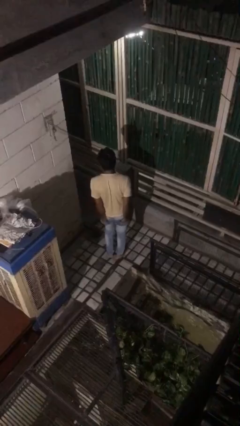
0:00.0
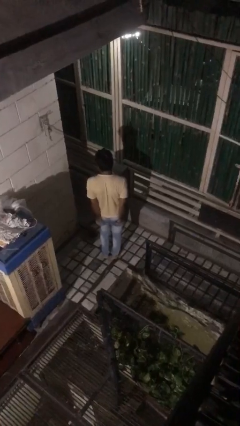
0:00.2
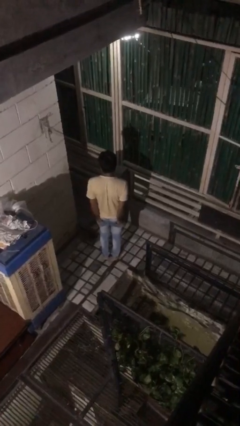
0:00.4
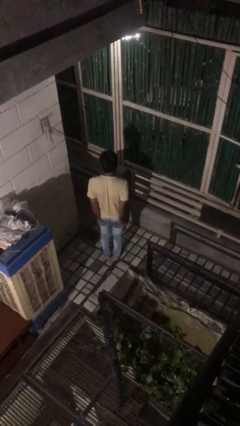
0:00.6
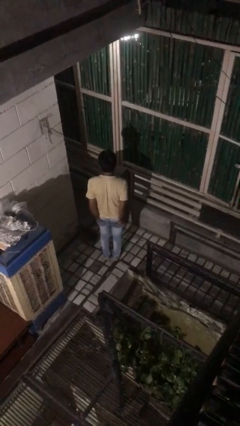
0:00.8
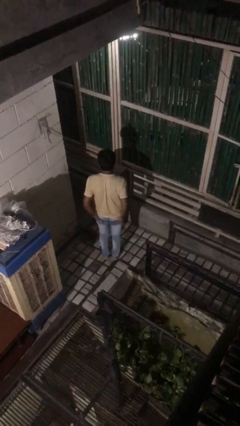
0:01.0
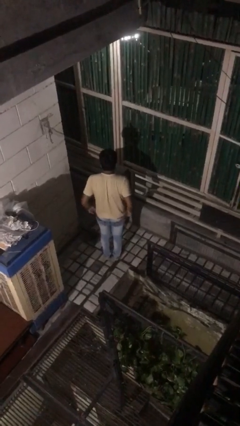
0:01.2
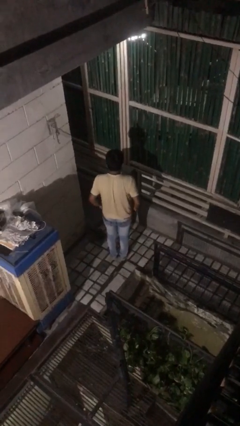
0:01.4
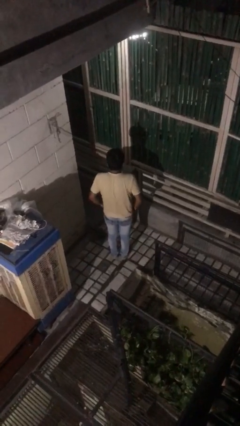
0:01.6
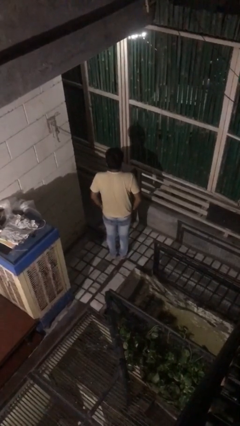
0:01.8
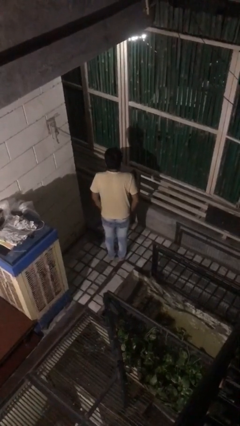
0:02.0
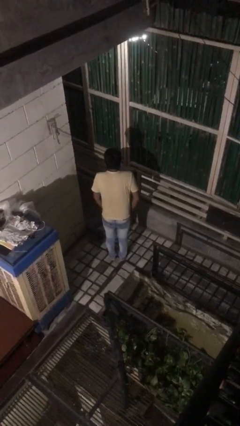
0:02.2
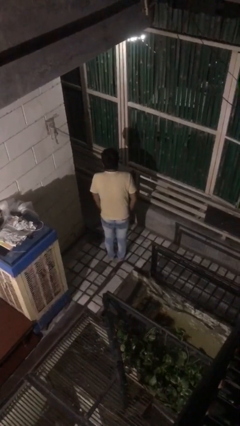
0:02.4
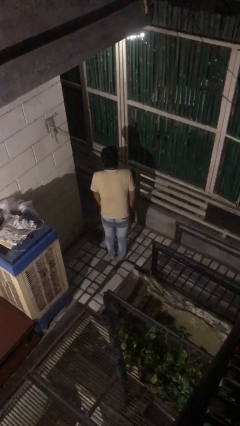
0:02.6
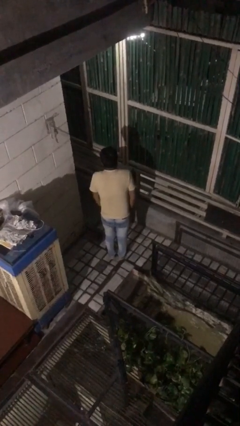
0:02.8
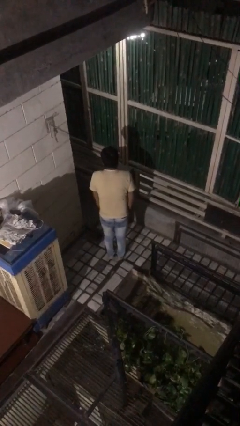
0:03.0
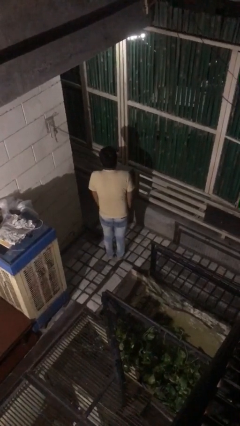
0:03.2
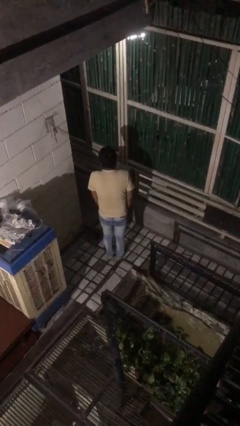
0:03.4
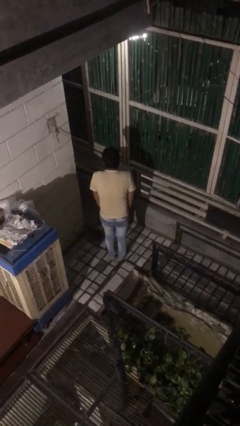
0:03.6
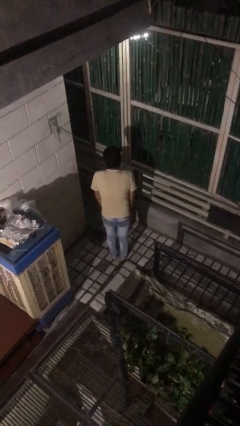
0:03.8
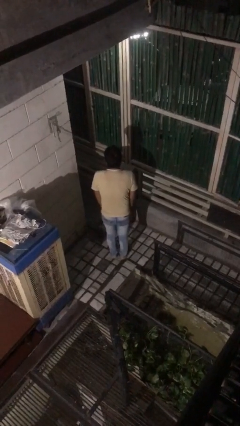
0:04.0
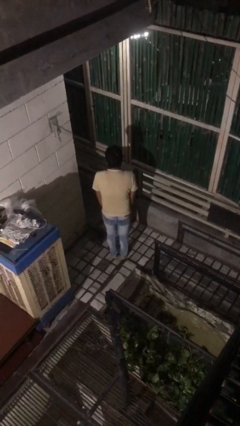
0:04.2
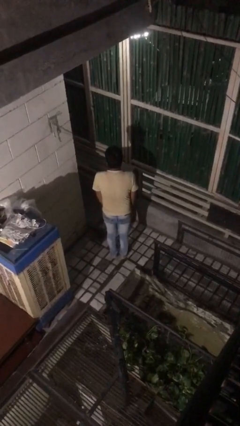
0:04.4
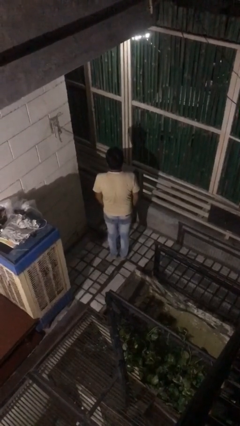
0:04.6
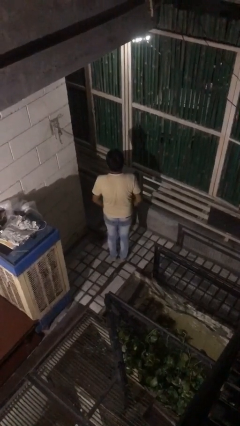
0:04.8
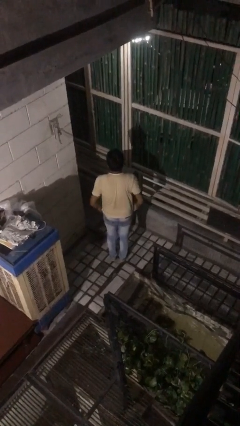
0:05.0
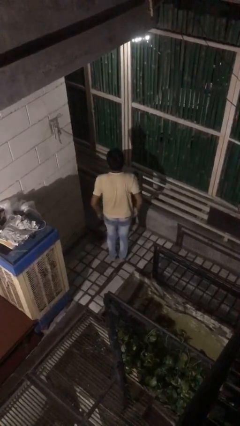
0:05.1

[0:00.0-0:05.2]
person puts hands in back pockets

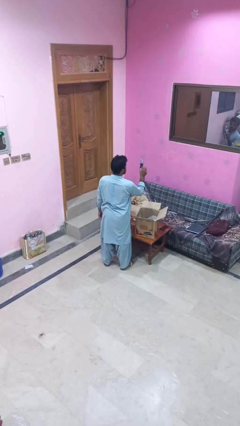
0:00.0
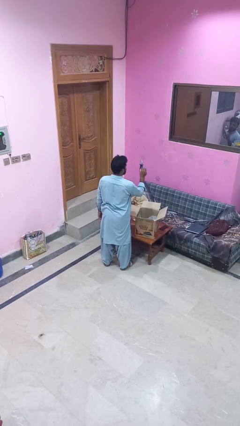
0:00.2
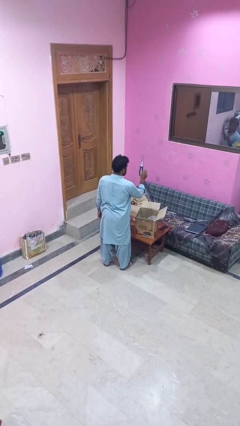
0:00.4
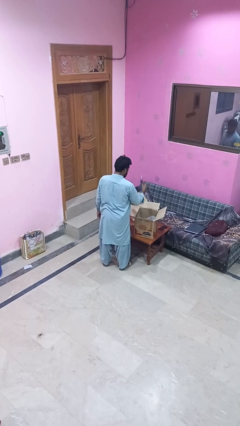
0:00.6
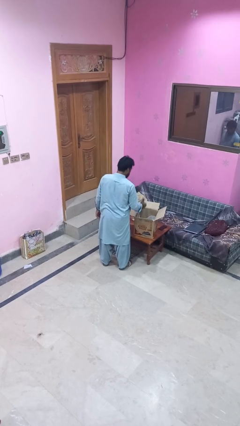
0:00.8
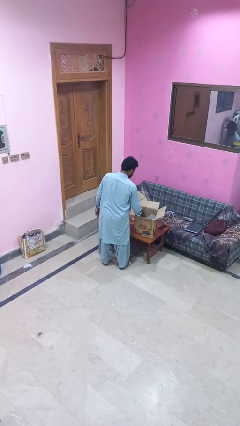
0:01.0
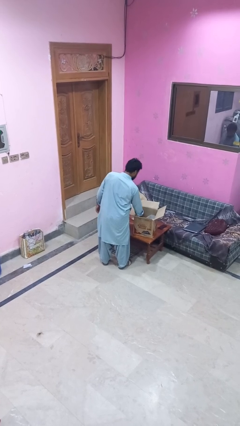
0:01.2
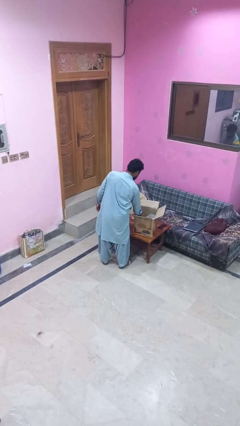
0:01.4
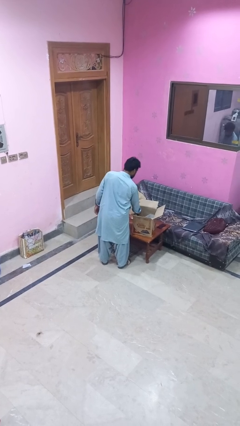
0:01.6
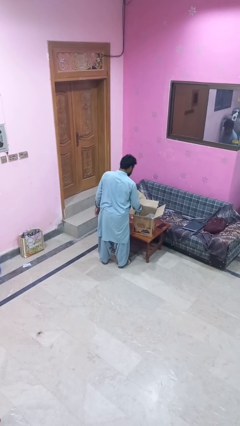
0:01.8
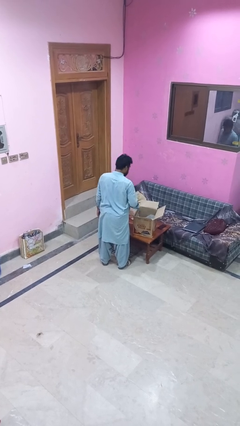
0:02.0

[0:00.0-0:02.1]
person puts object into box

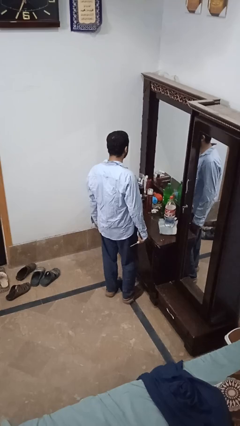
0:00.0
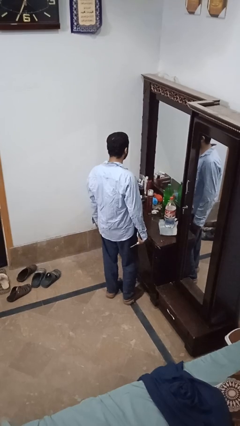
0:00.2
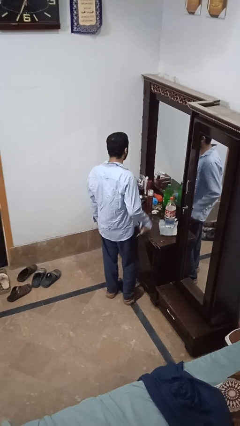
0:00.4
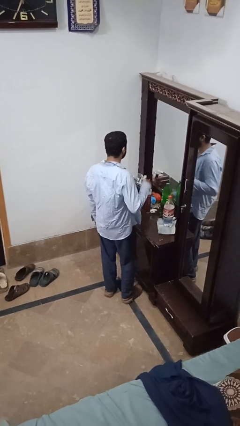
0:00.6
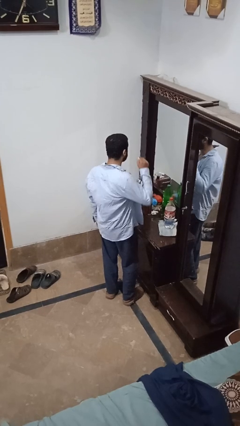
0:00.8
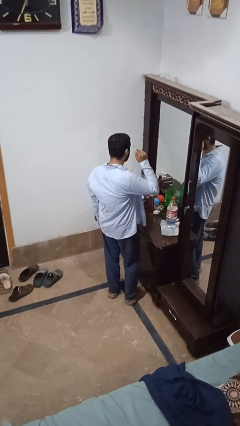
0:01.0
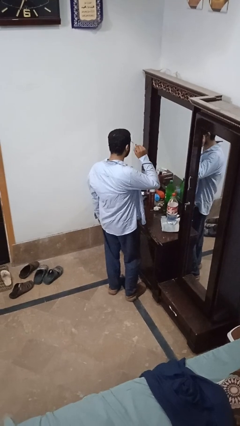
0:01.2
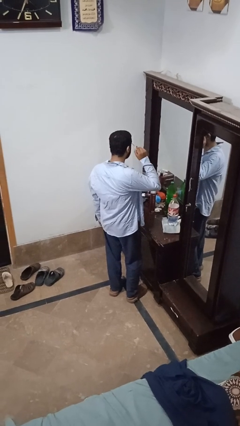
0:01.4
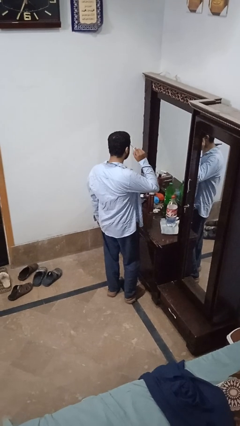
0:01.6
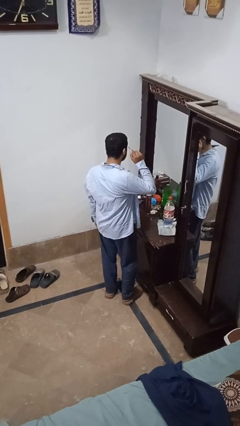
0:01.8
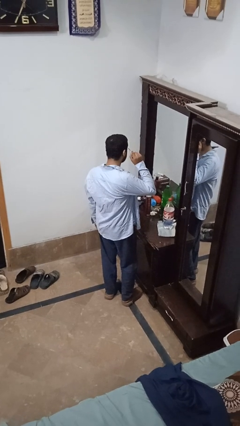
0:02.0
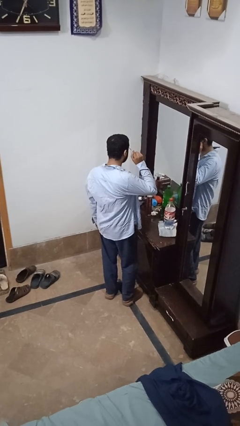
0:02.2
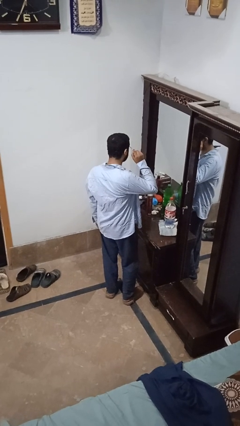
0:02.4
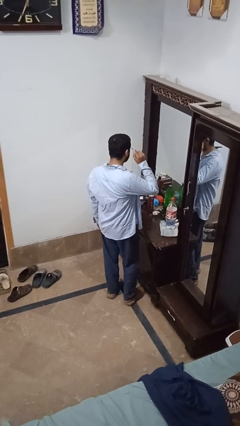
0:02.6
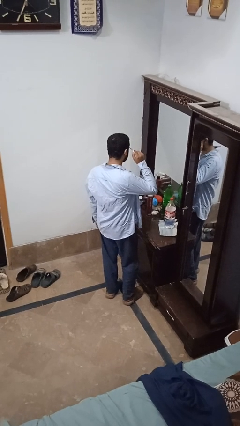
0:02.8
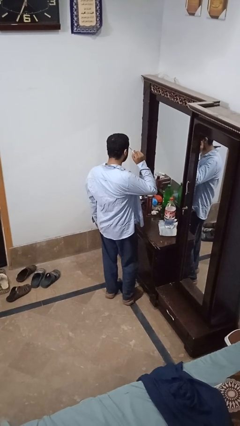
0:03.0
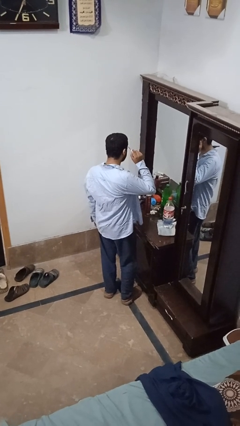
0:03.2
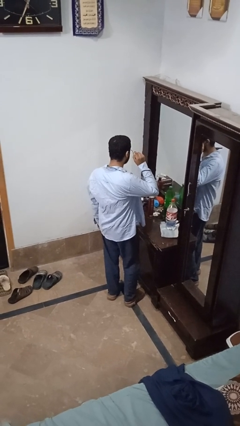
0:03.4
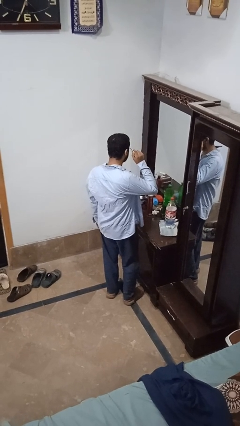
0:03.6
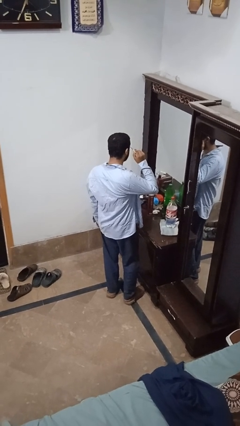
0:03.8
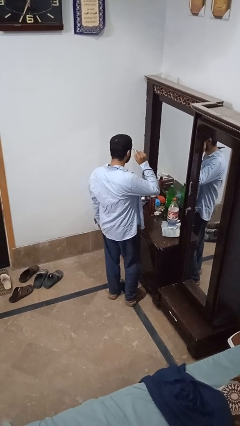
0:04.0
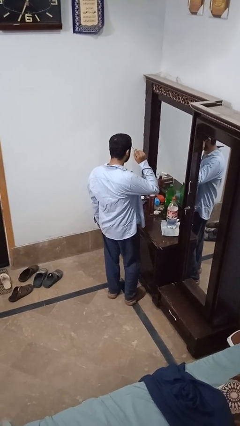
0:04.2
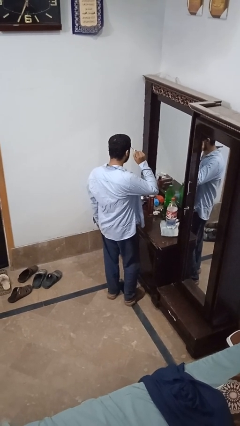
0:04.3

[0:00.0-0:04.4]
person applies eye makeup

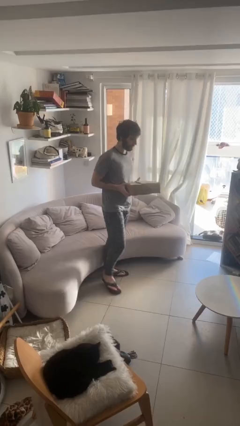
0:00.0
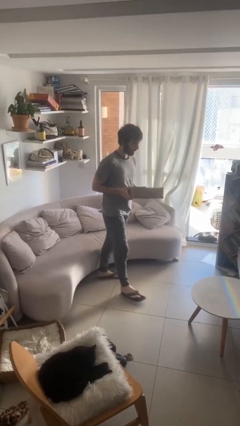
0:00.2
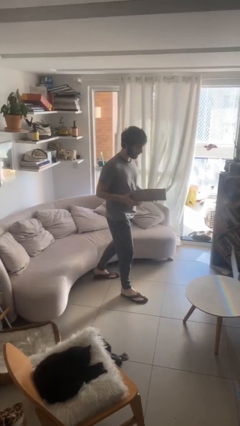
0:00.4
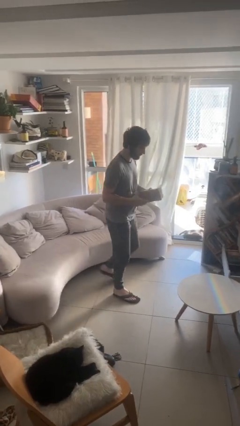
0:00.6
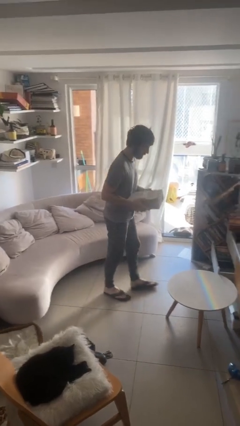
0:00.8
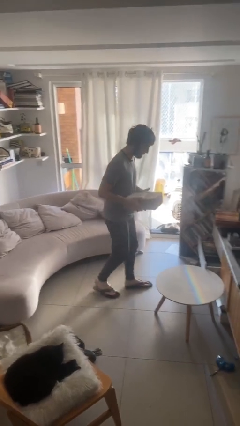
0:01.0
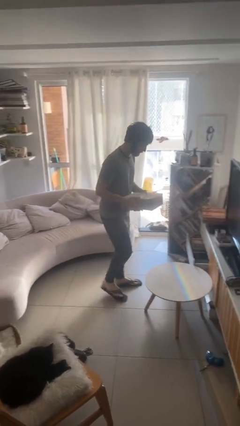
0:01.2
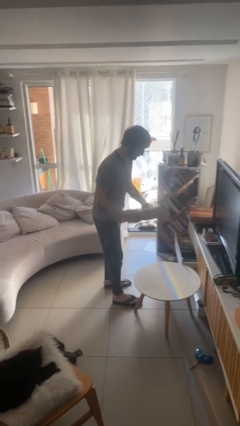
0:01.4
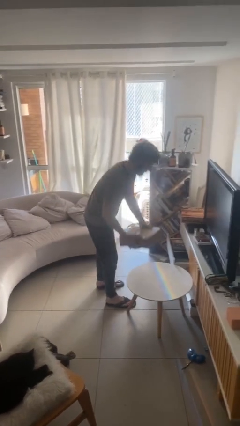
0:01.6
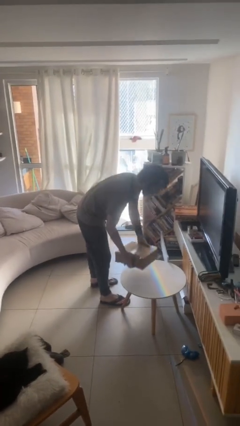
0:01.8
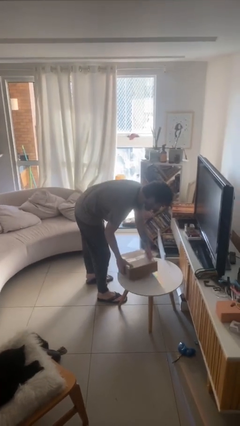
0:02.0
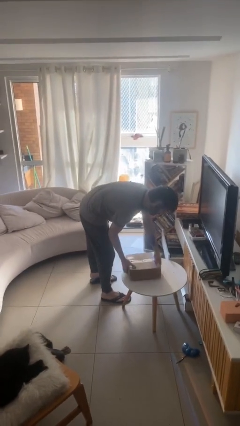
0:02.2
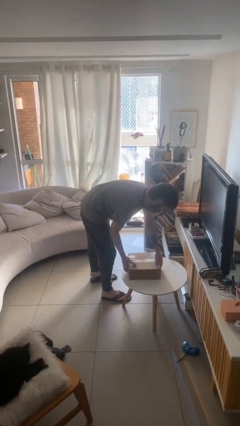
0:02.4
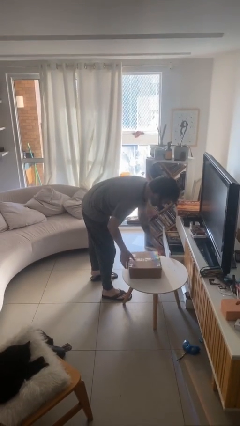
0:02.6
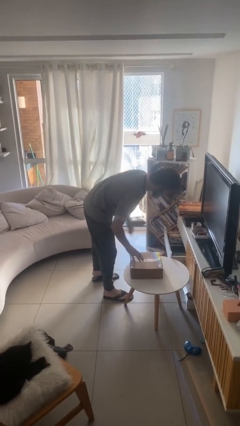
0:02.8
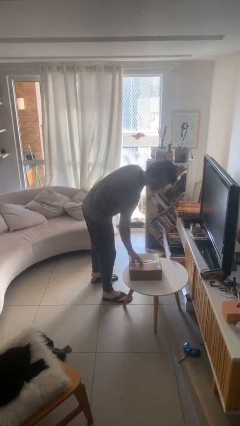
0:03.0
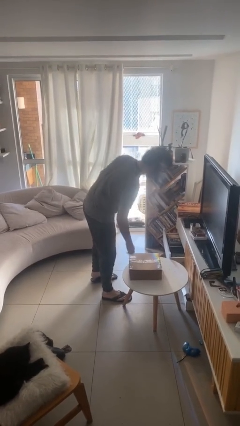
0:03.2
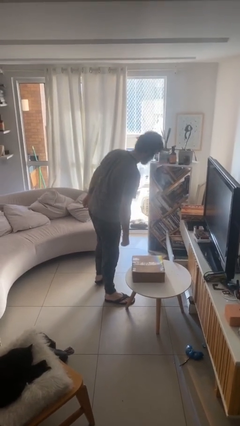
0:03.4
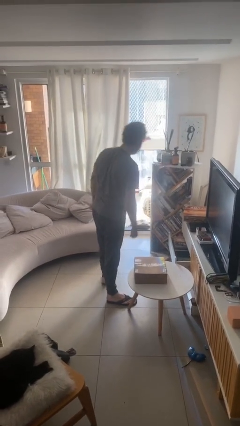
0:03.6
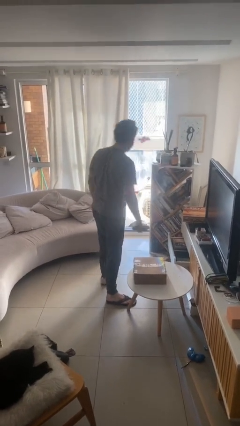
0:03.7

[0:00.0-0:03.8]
person puts down object on table

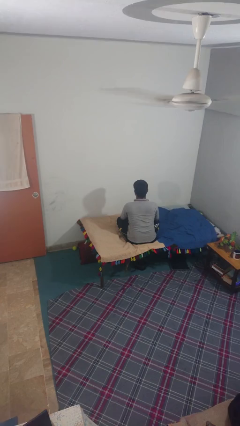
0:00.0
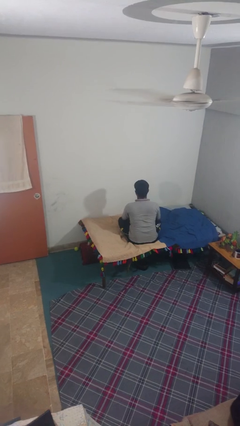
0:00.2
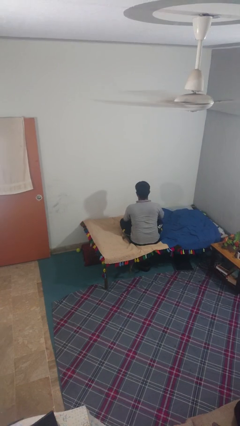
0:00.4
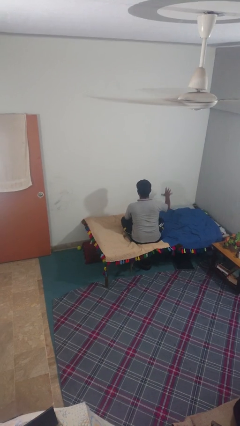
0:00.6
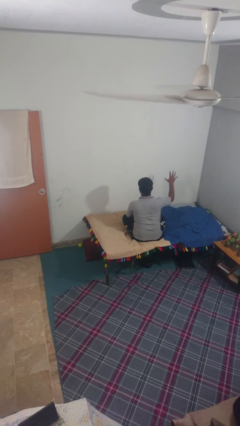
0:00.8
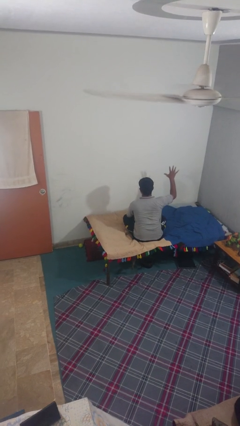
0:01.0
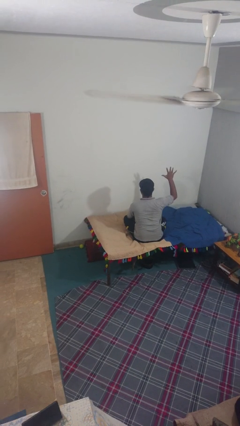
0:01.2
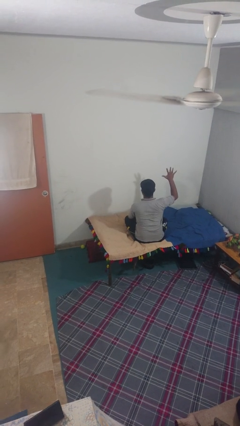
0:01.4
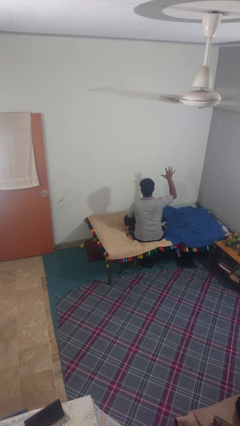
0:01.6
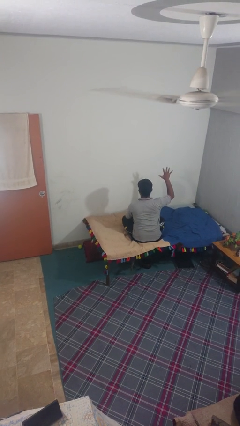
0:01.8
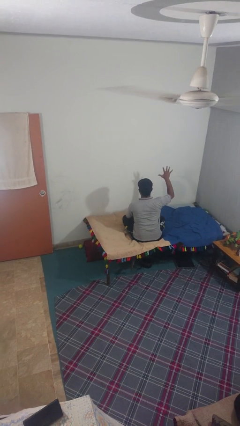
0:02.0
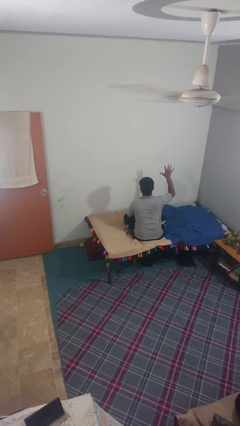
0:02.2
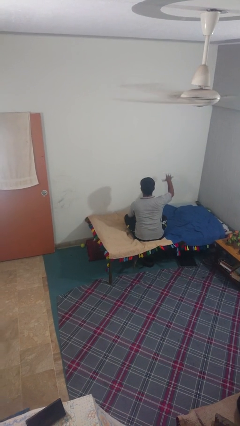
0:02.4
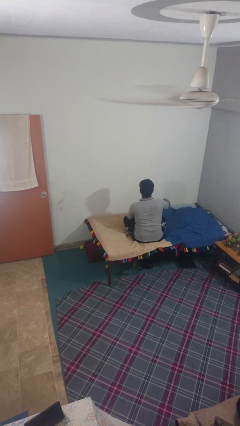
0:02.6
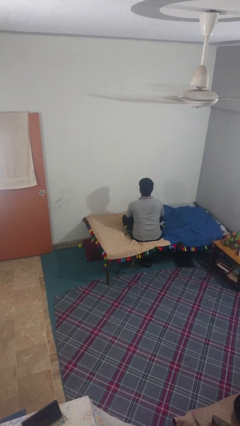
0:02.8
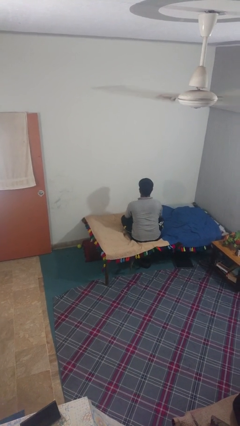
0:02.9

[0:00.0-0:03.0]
person gestures number five
